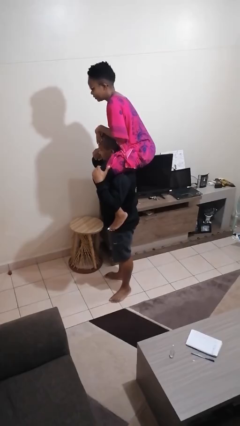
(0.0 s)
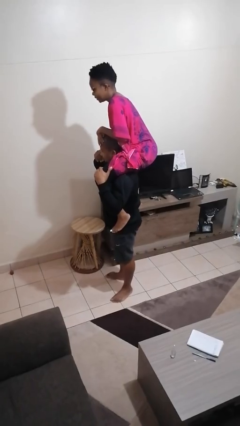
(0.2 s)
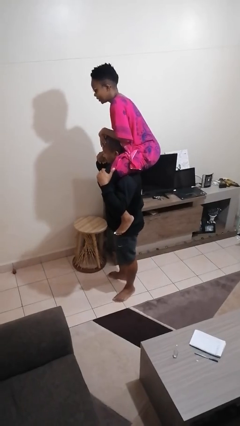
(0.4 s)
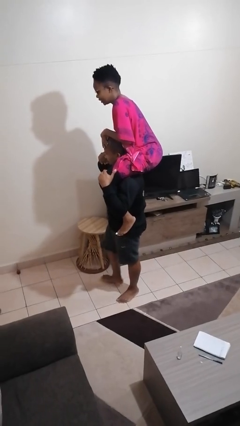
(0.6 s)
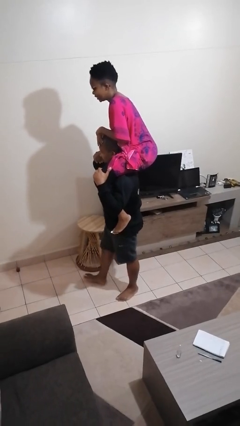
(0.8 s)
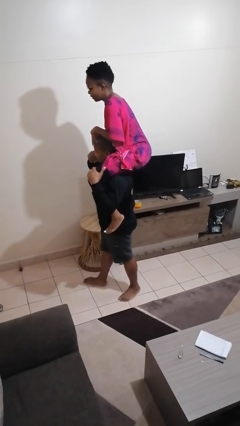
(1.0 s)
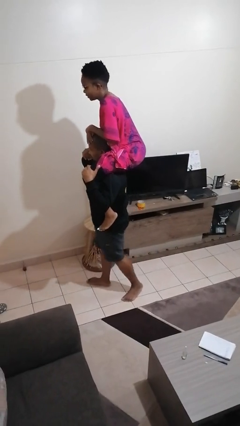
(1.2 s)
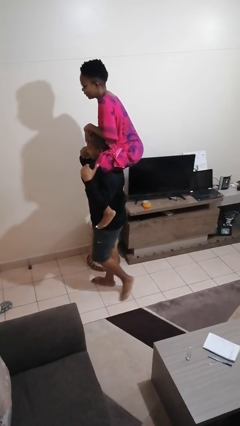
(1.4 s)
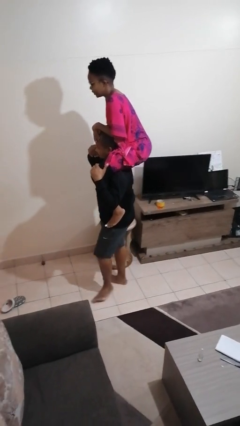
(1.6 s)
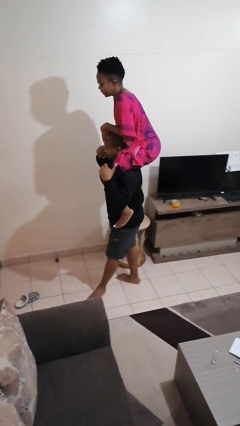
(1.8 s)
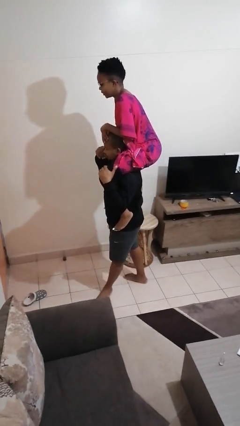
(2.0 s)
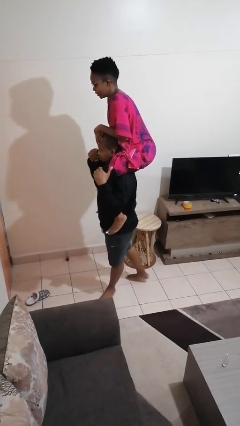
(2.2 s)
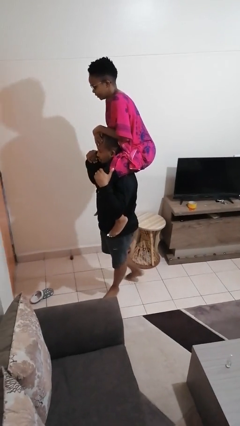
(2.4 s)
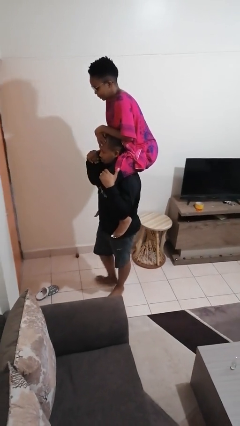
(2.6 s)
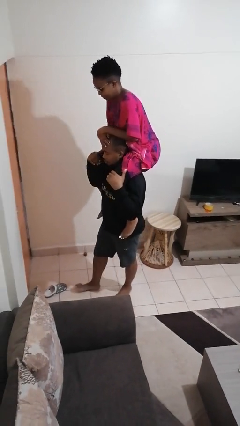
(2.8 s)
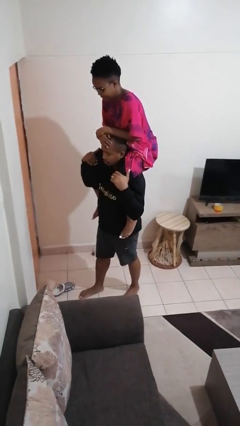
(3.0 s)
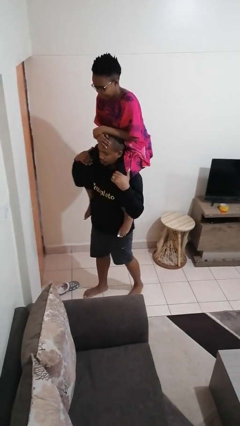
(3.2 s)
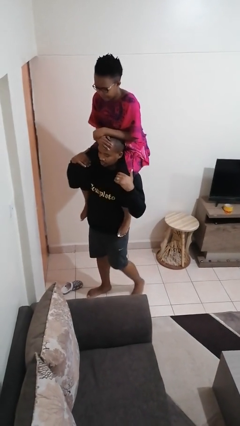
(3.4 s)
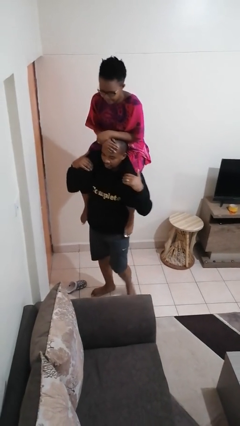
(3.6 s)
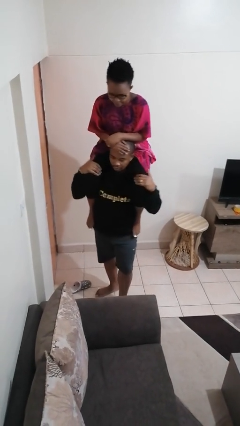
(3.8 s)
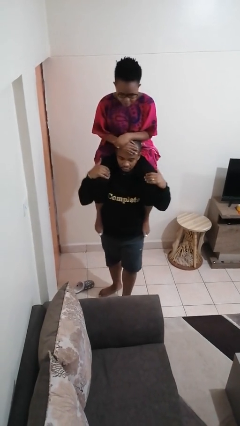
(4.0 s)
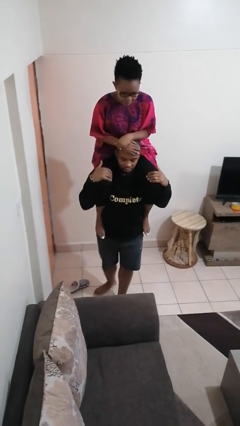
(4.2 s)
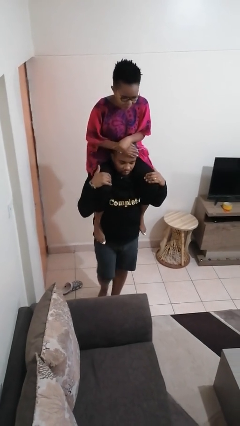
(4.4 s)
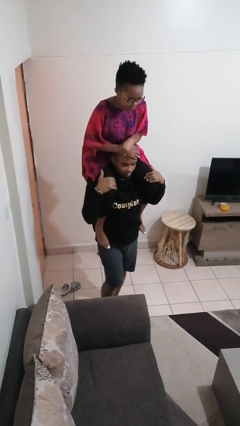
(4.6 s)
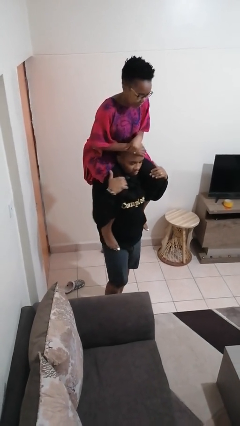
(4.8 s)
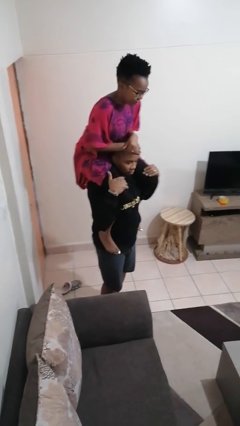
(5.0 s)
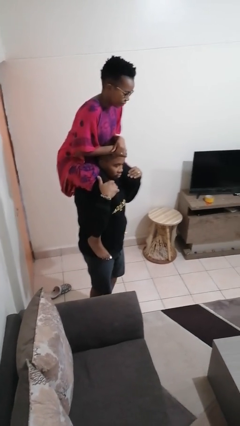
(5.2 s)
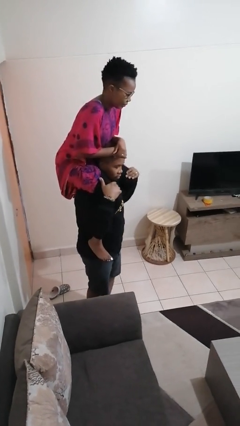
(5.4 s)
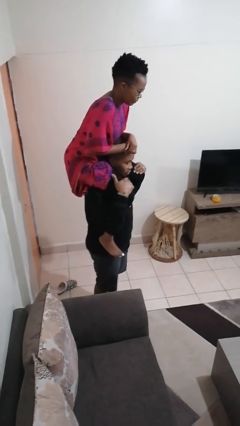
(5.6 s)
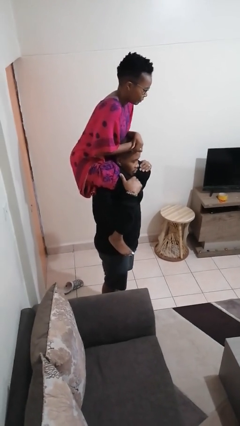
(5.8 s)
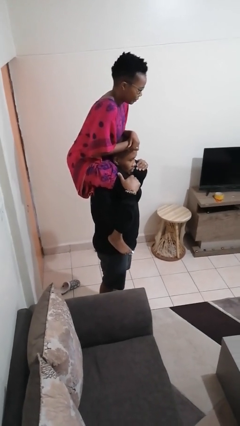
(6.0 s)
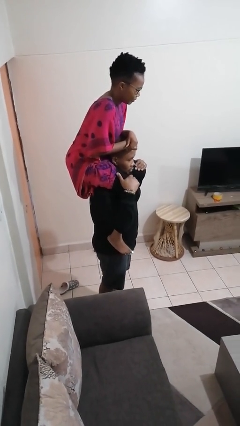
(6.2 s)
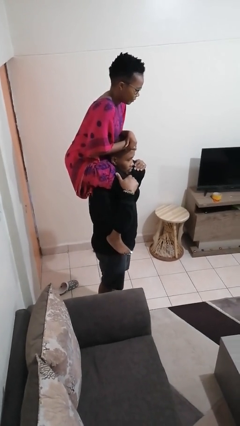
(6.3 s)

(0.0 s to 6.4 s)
person carries person on shoulders

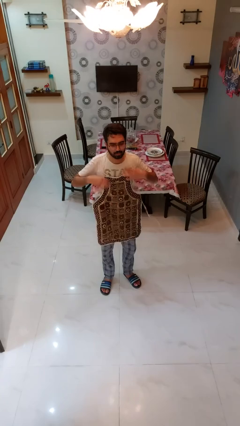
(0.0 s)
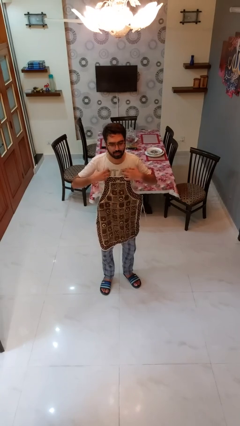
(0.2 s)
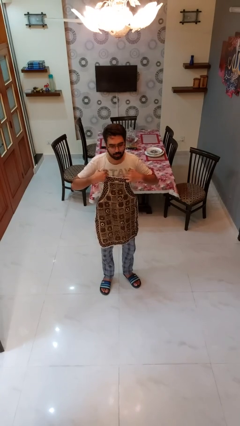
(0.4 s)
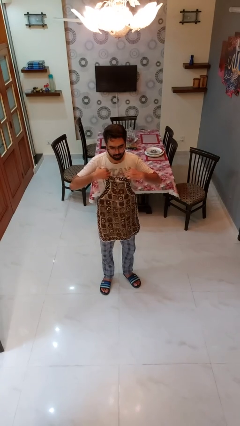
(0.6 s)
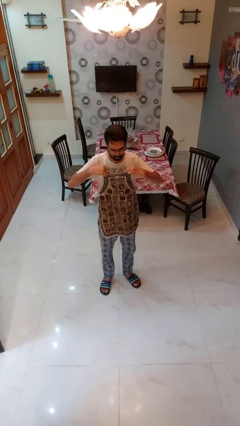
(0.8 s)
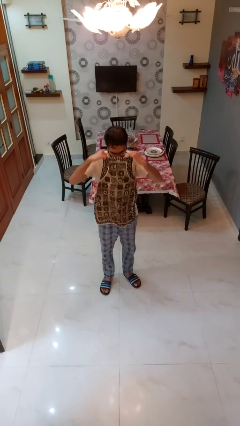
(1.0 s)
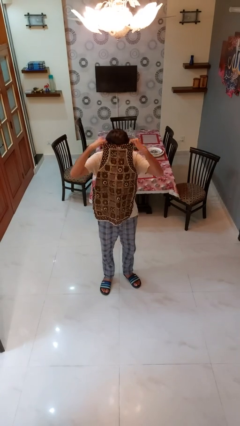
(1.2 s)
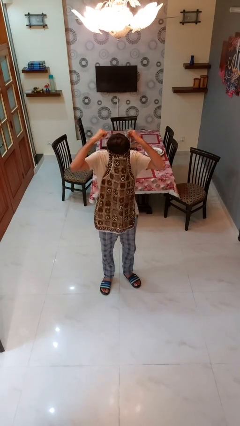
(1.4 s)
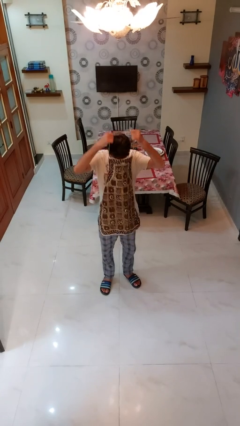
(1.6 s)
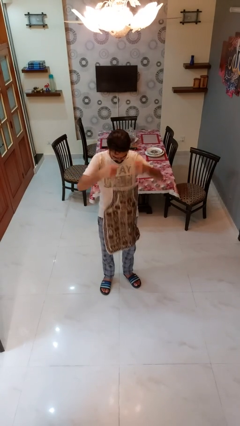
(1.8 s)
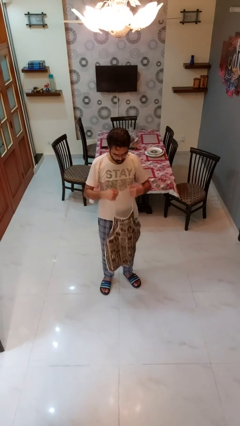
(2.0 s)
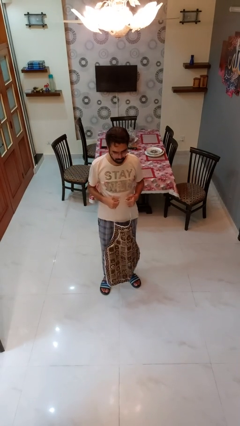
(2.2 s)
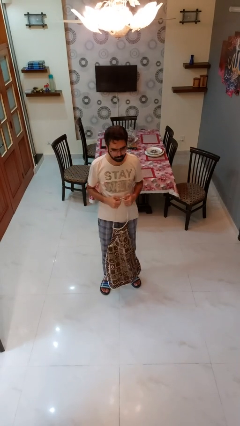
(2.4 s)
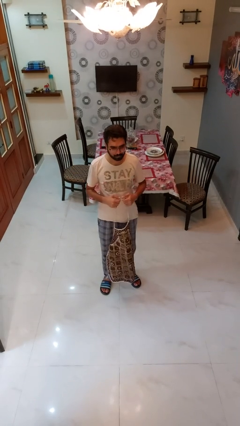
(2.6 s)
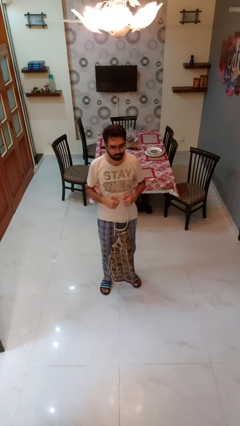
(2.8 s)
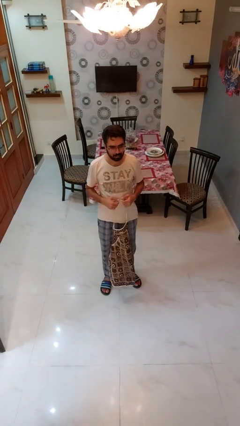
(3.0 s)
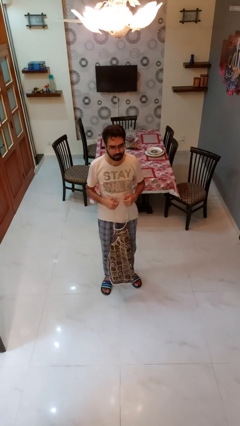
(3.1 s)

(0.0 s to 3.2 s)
person takes off apron

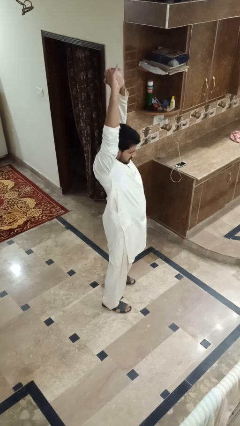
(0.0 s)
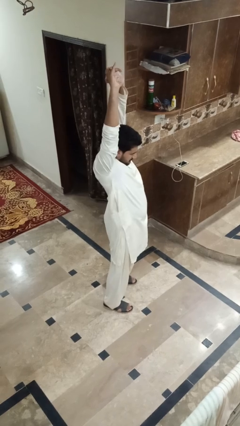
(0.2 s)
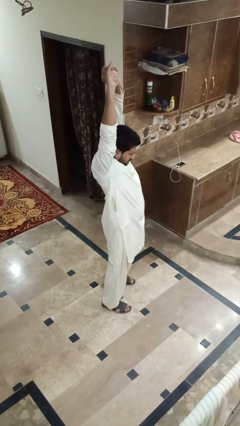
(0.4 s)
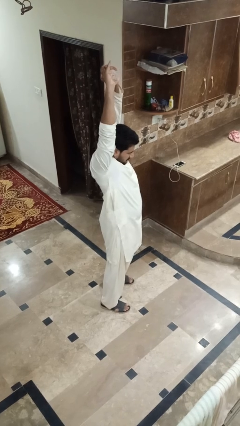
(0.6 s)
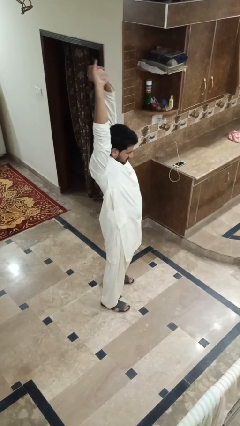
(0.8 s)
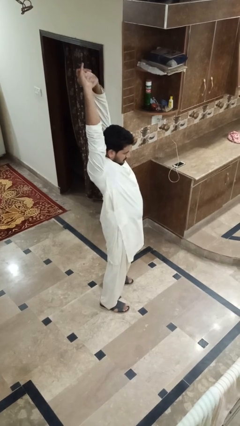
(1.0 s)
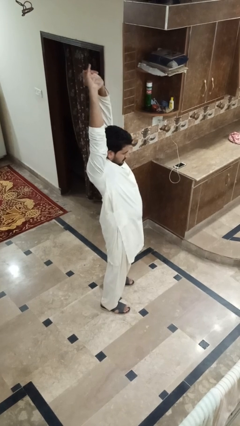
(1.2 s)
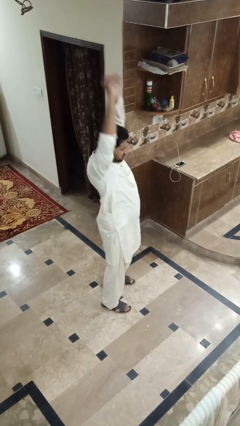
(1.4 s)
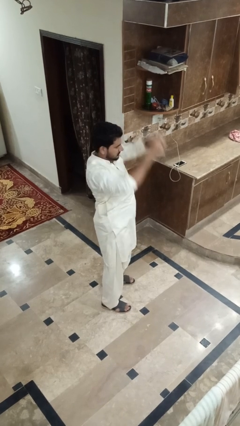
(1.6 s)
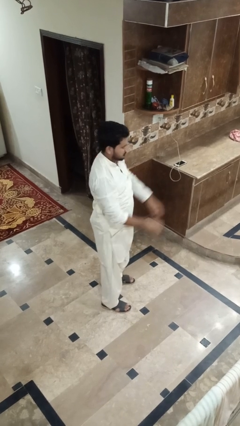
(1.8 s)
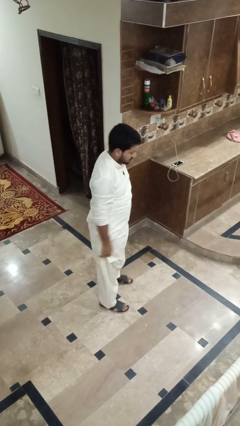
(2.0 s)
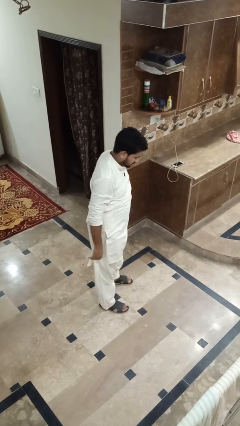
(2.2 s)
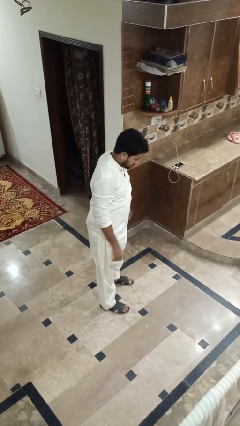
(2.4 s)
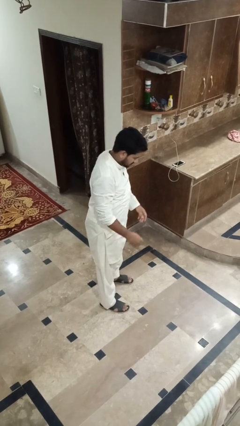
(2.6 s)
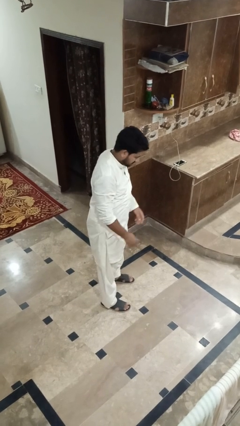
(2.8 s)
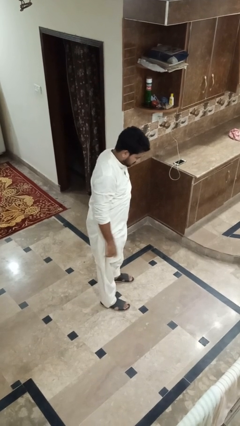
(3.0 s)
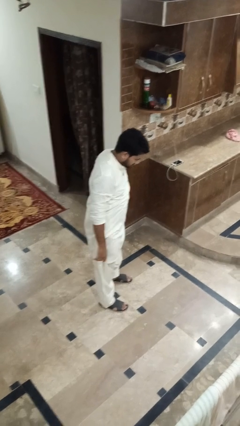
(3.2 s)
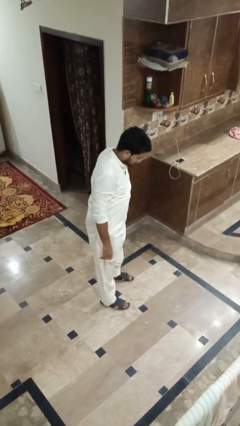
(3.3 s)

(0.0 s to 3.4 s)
person stretches arms over head

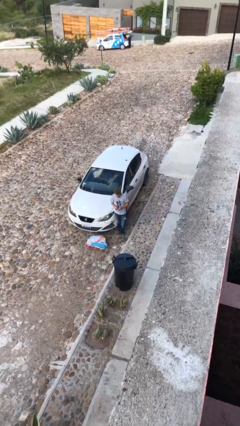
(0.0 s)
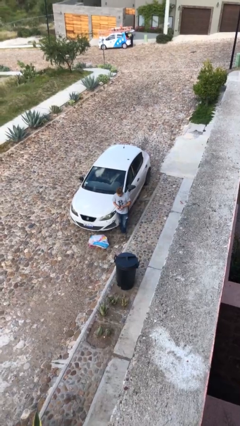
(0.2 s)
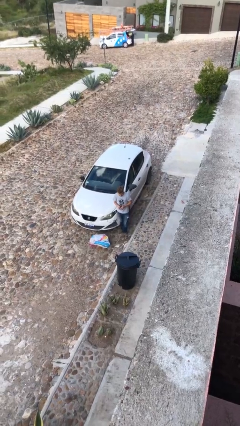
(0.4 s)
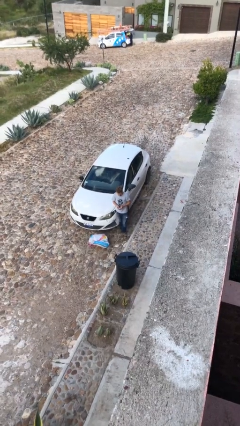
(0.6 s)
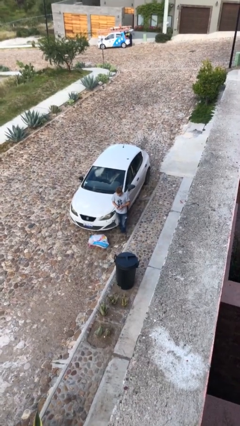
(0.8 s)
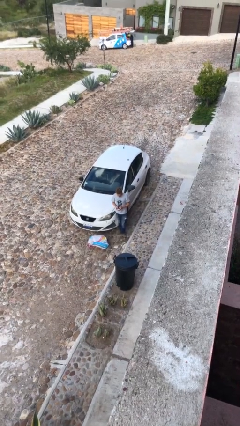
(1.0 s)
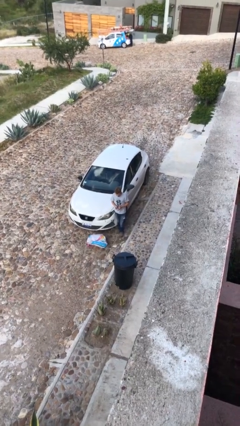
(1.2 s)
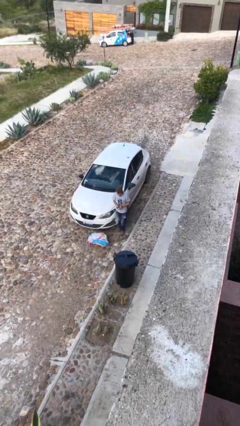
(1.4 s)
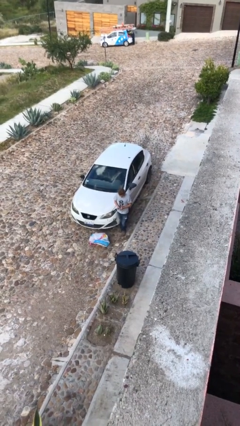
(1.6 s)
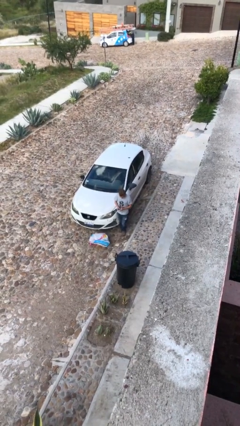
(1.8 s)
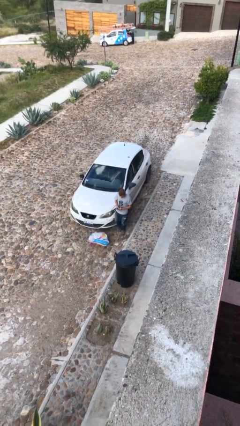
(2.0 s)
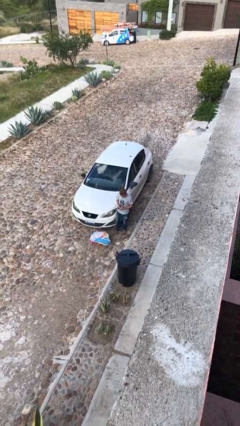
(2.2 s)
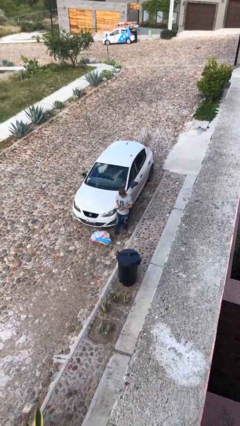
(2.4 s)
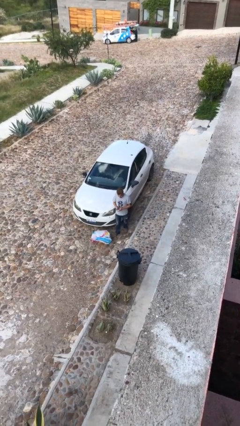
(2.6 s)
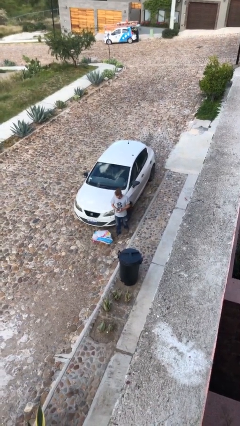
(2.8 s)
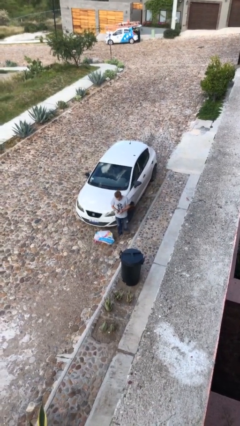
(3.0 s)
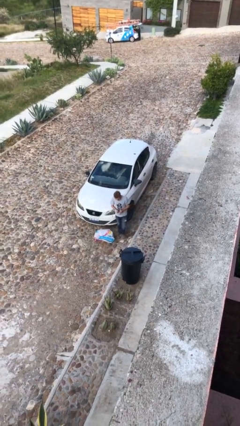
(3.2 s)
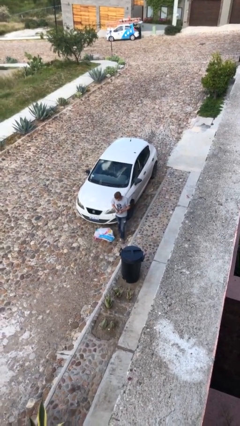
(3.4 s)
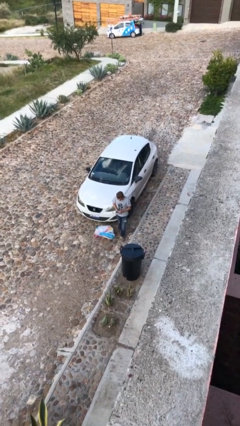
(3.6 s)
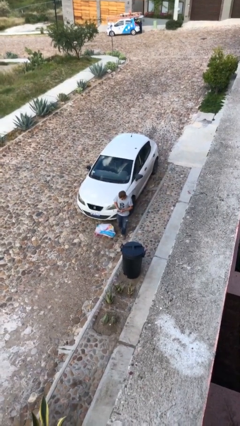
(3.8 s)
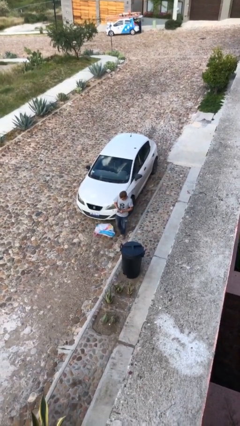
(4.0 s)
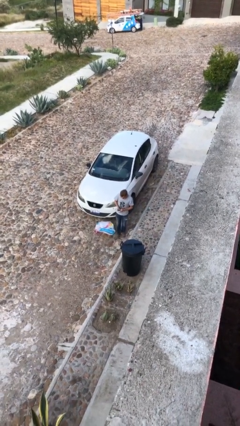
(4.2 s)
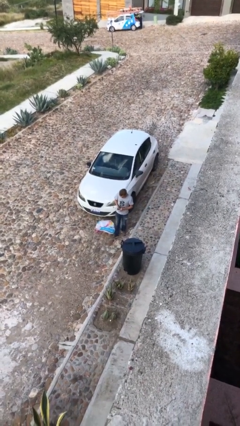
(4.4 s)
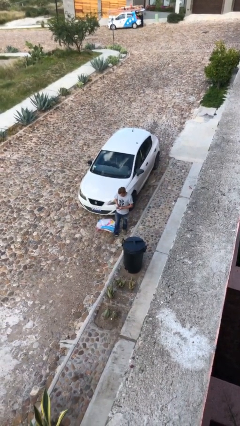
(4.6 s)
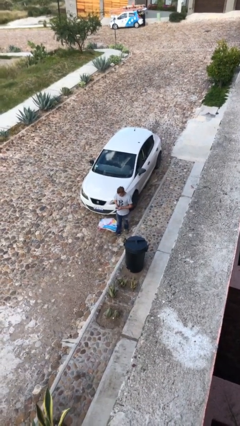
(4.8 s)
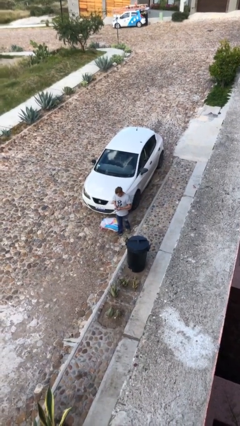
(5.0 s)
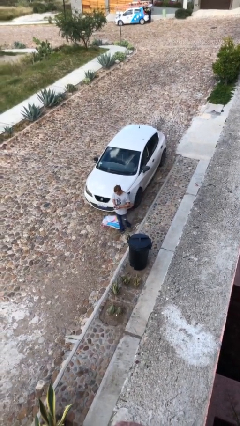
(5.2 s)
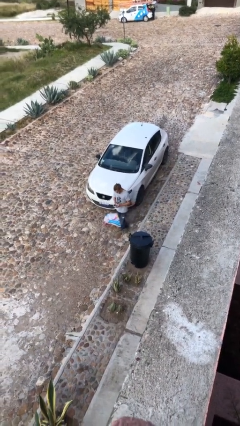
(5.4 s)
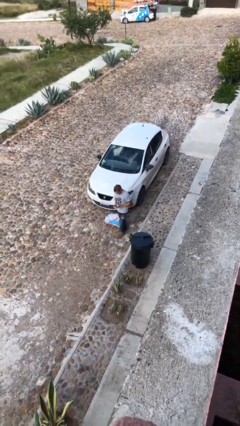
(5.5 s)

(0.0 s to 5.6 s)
person texts on phone
